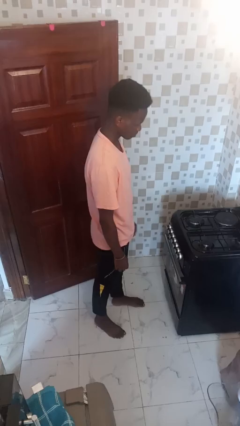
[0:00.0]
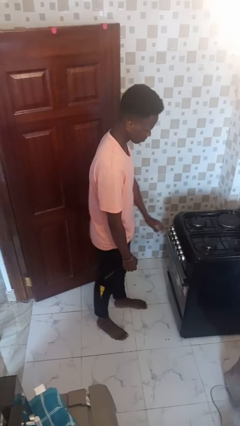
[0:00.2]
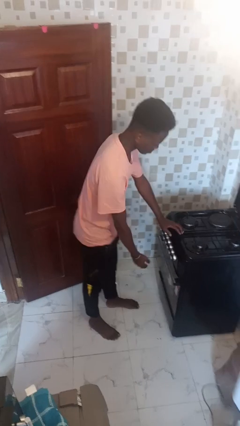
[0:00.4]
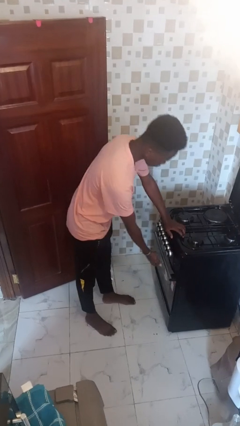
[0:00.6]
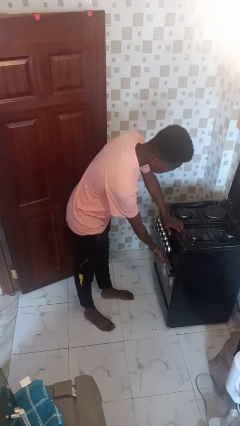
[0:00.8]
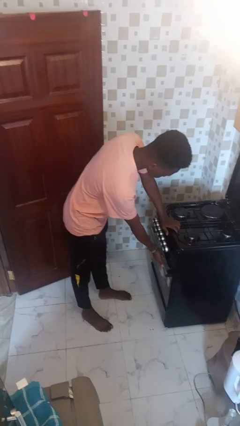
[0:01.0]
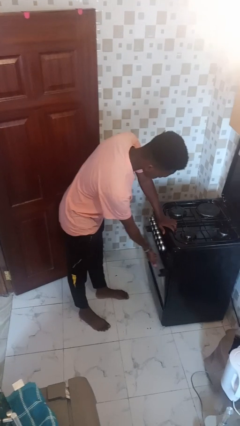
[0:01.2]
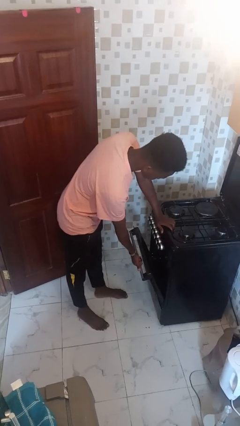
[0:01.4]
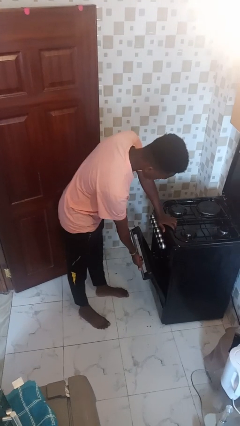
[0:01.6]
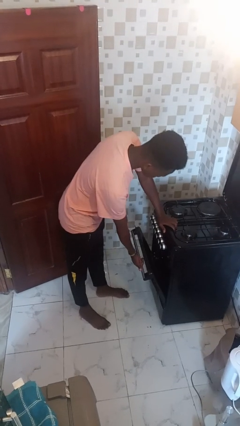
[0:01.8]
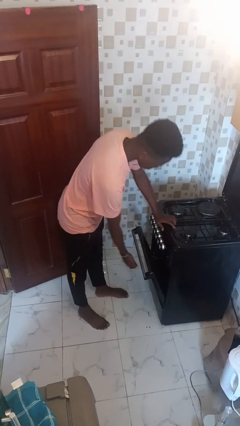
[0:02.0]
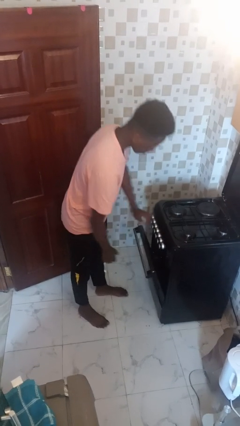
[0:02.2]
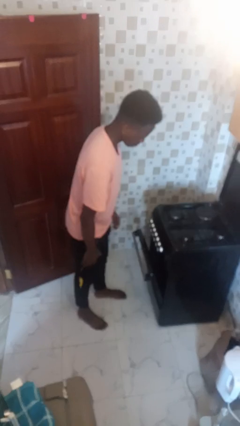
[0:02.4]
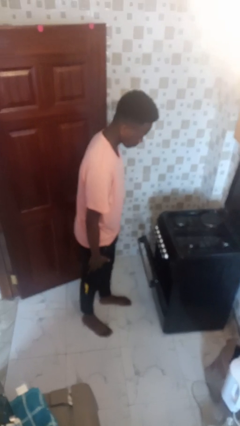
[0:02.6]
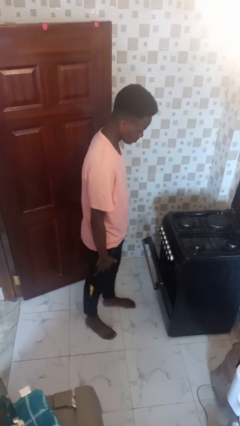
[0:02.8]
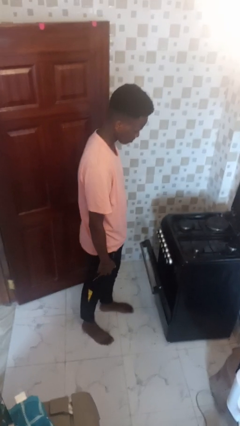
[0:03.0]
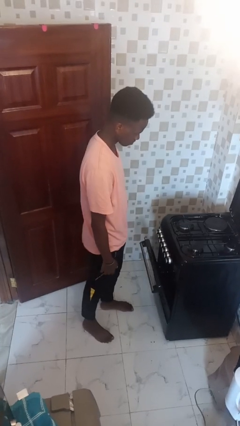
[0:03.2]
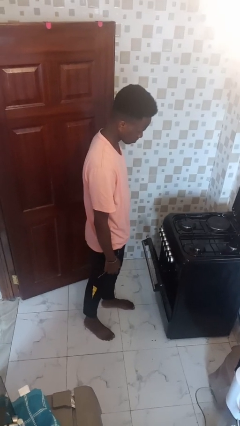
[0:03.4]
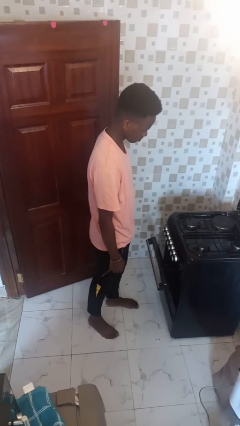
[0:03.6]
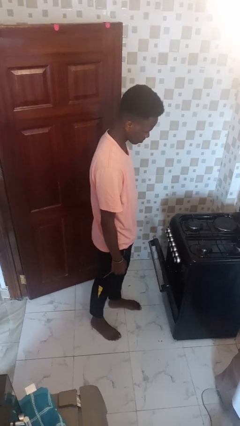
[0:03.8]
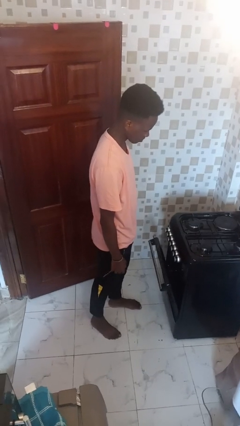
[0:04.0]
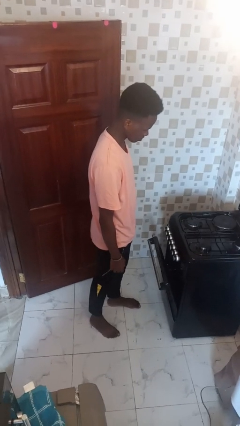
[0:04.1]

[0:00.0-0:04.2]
person opens oven door

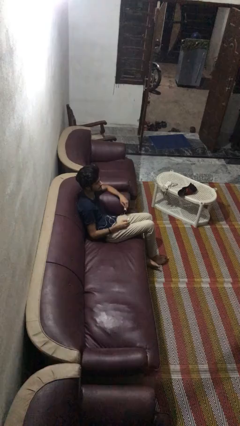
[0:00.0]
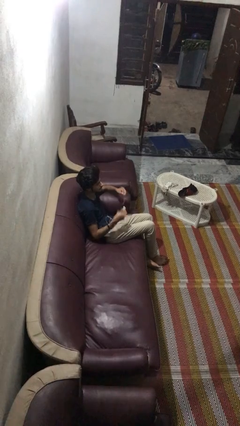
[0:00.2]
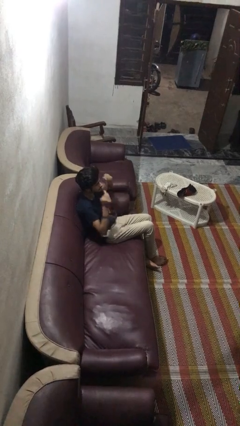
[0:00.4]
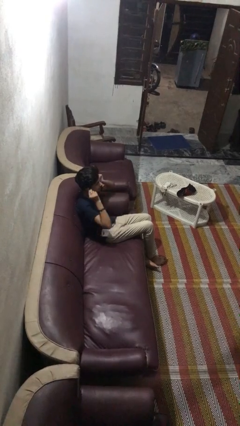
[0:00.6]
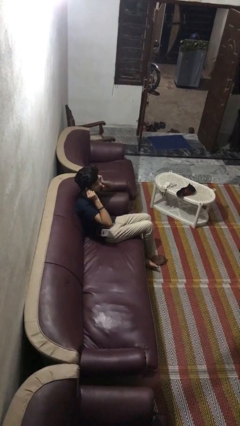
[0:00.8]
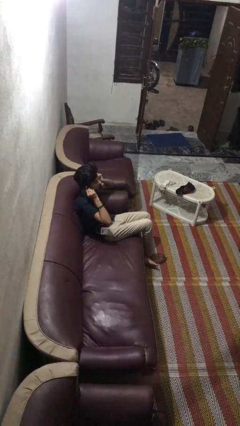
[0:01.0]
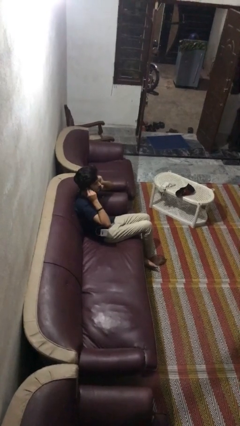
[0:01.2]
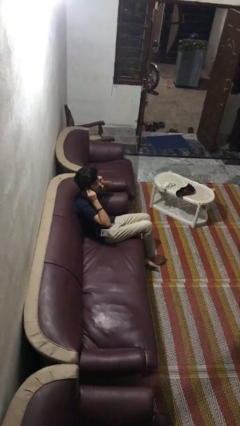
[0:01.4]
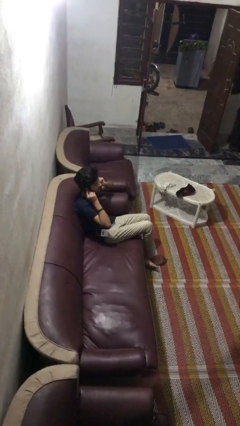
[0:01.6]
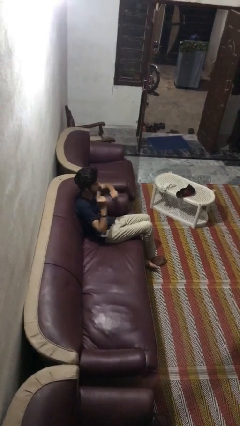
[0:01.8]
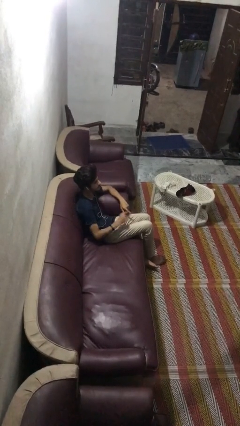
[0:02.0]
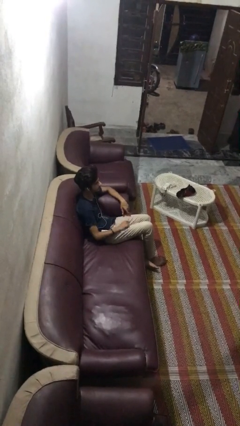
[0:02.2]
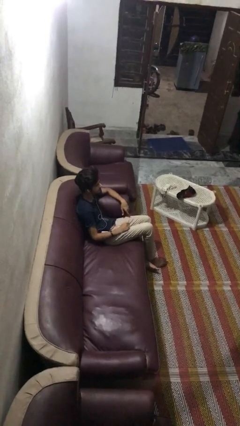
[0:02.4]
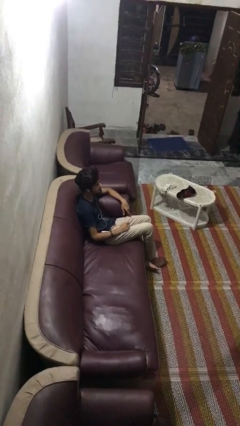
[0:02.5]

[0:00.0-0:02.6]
person puts on headphones

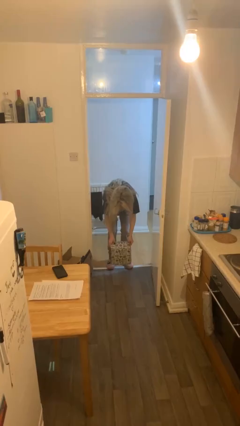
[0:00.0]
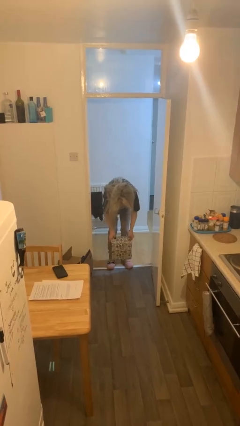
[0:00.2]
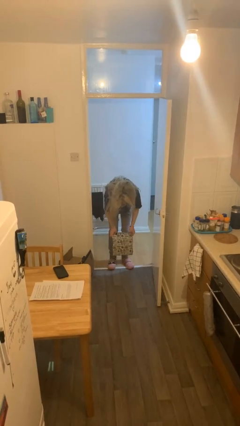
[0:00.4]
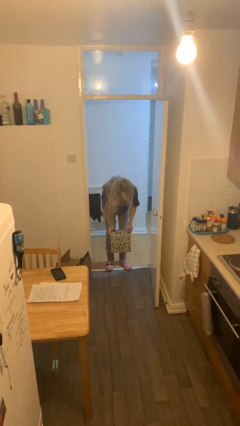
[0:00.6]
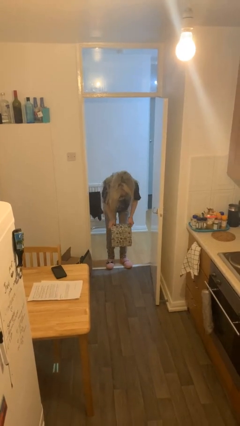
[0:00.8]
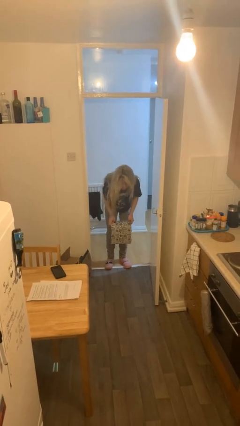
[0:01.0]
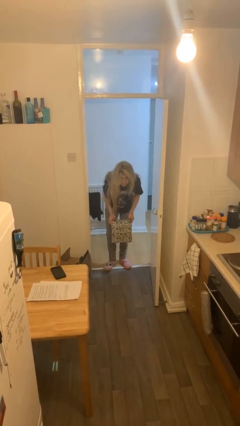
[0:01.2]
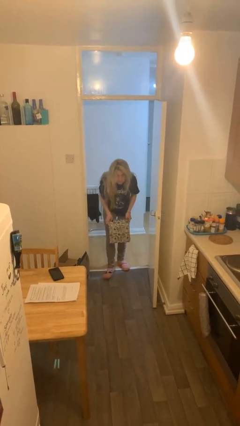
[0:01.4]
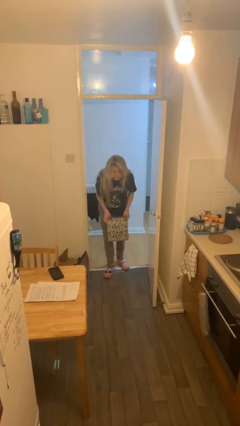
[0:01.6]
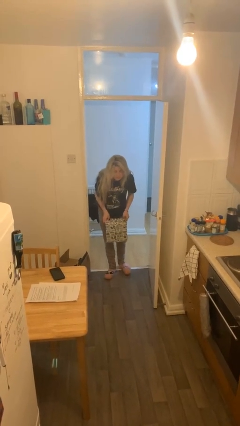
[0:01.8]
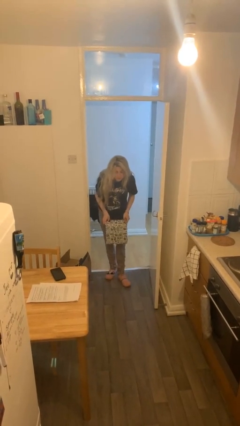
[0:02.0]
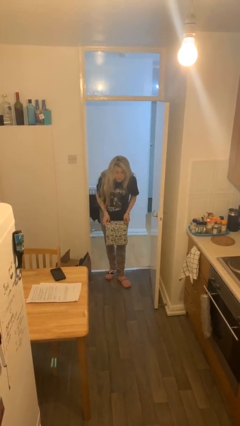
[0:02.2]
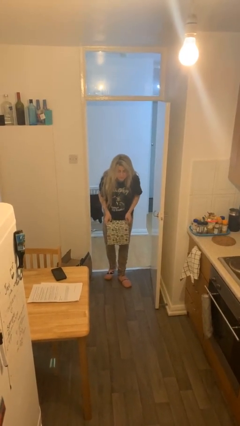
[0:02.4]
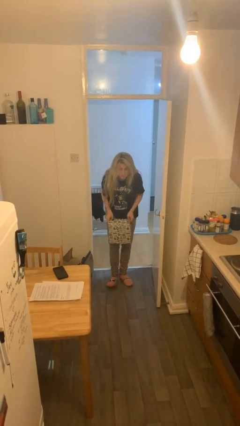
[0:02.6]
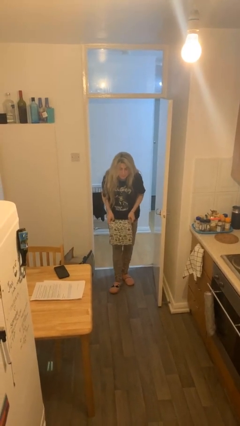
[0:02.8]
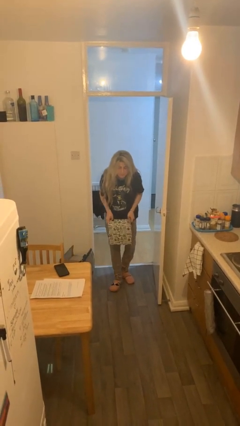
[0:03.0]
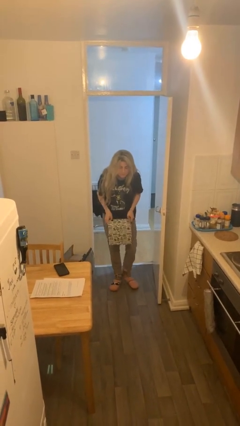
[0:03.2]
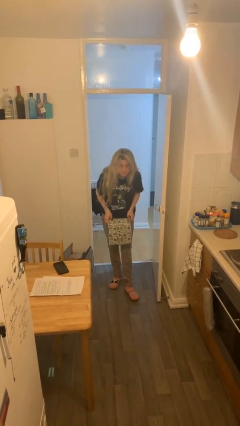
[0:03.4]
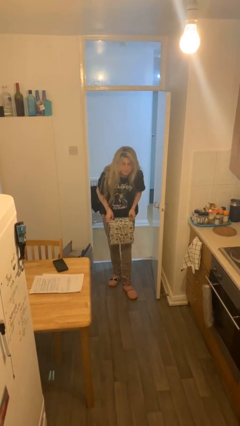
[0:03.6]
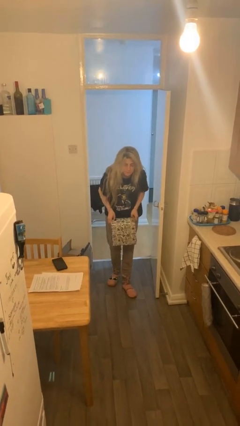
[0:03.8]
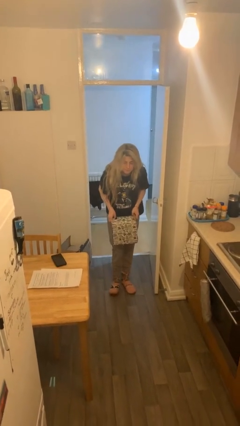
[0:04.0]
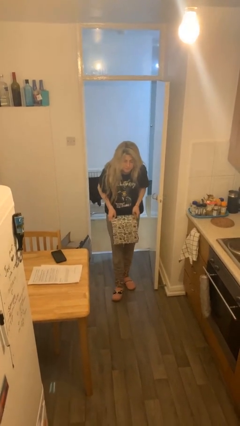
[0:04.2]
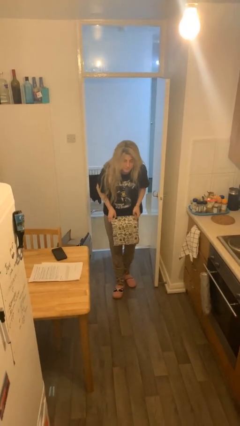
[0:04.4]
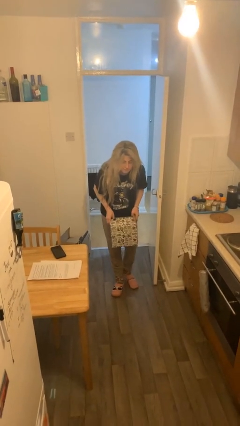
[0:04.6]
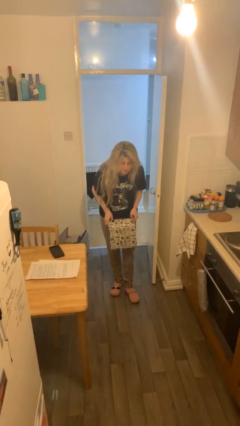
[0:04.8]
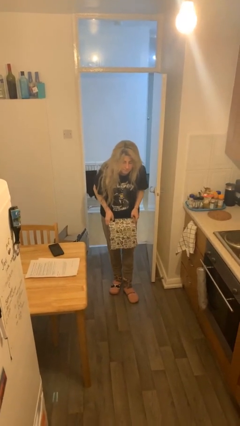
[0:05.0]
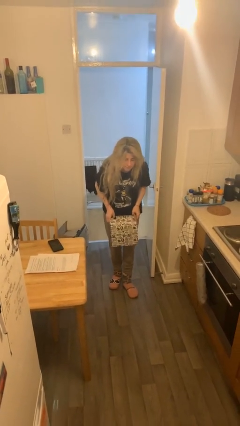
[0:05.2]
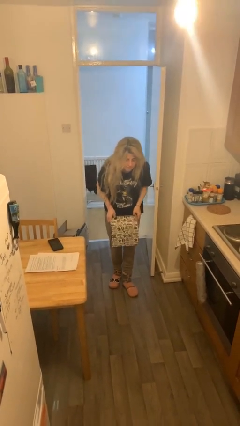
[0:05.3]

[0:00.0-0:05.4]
person carries heavy object

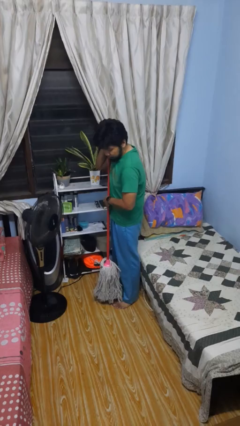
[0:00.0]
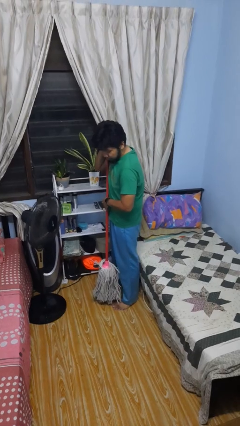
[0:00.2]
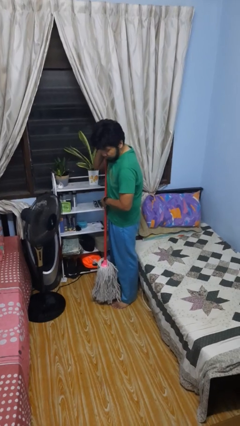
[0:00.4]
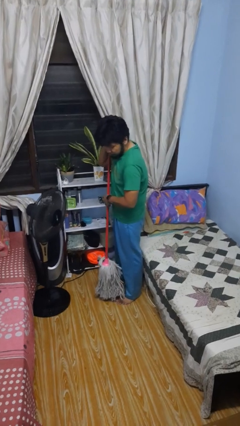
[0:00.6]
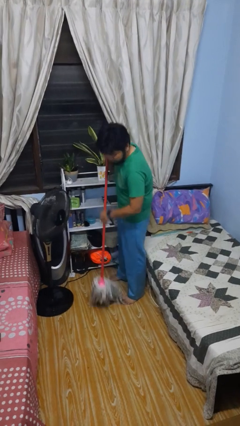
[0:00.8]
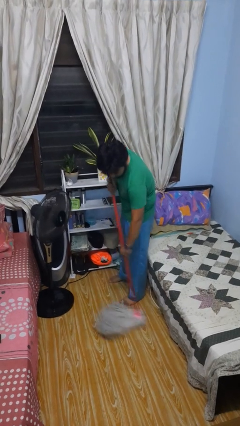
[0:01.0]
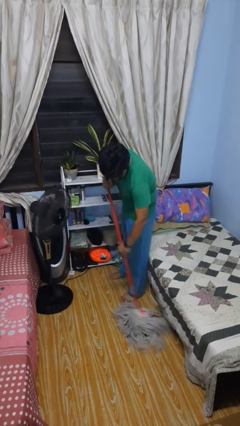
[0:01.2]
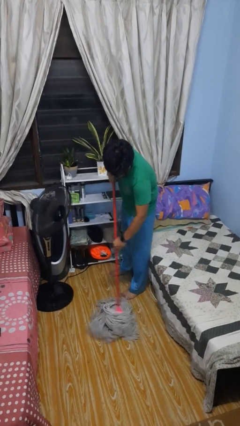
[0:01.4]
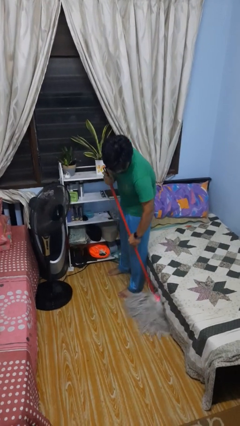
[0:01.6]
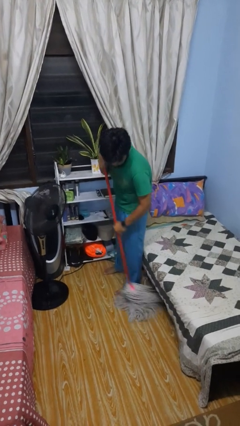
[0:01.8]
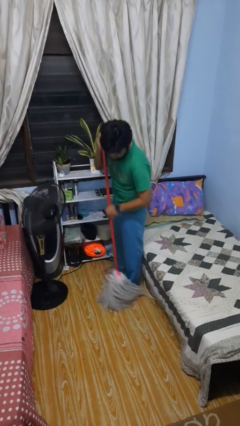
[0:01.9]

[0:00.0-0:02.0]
person mops

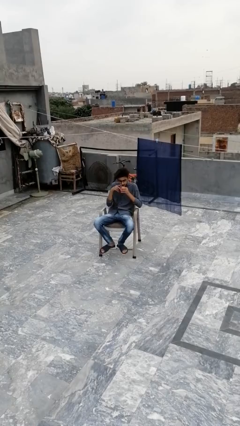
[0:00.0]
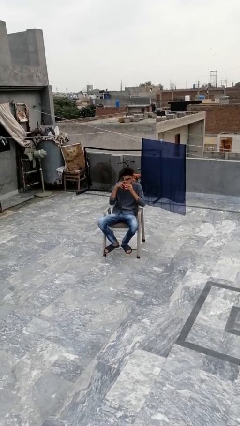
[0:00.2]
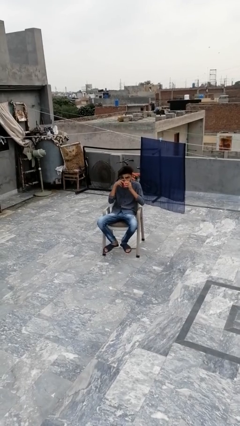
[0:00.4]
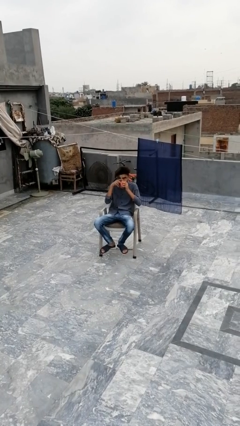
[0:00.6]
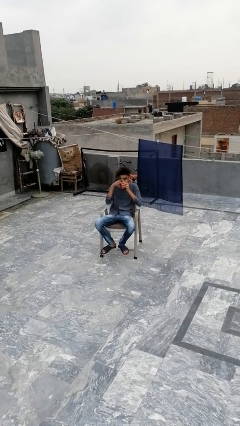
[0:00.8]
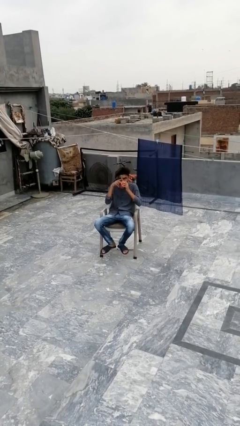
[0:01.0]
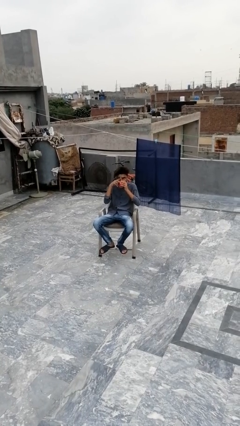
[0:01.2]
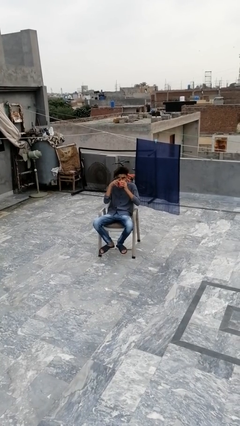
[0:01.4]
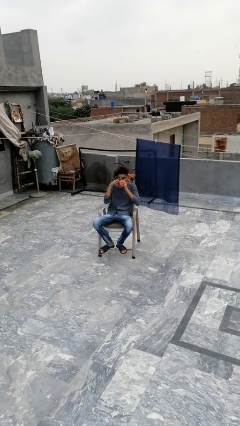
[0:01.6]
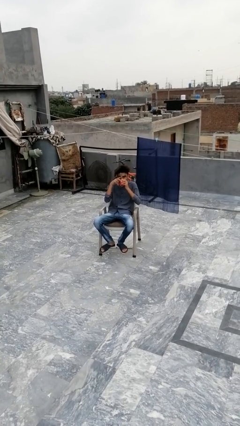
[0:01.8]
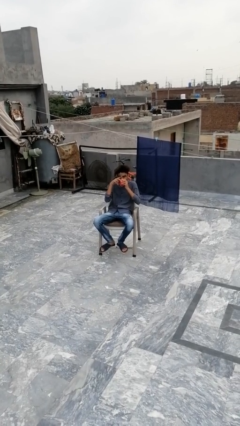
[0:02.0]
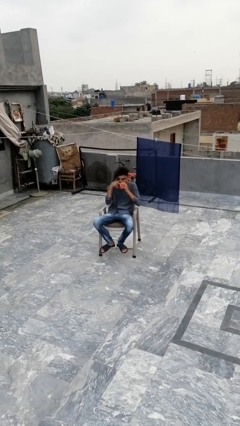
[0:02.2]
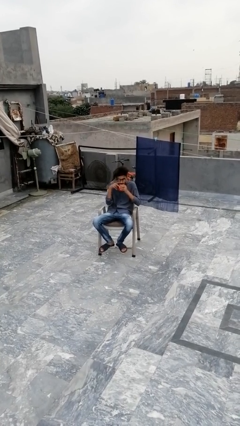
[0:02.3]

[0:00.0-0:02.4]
person drinks from mug

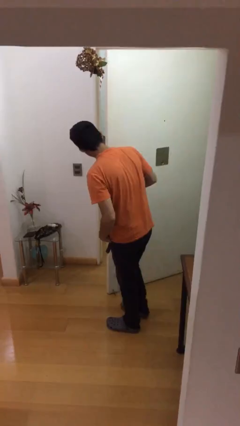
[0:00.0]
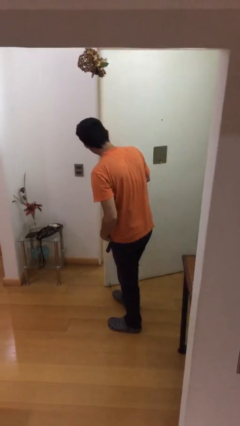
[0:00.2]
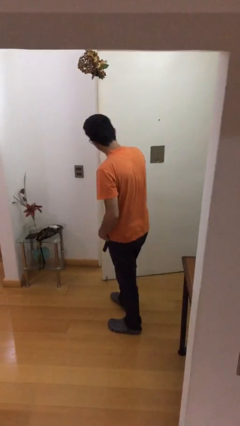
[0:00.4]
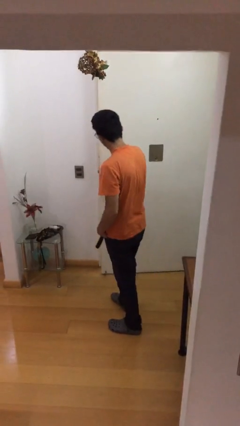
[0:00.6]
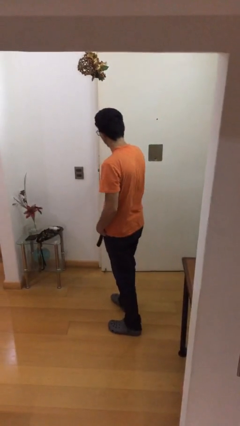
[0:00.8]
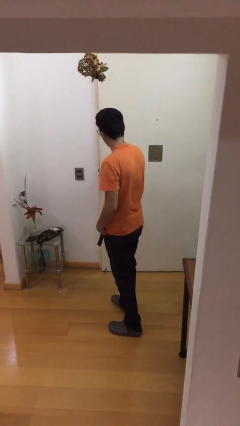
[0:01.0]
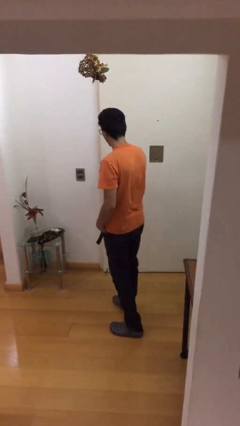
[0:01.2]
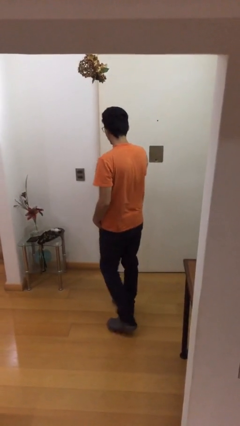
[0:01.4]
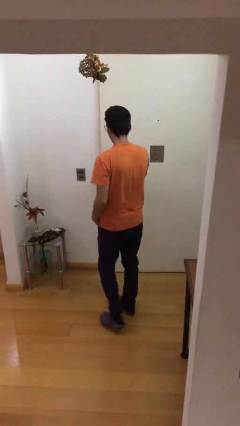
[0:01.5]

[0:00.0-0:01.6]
person closes facility door
